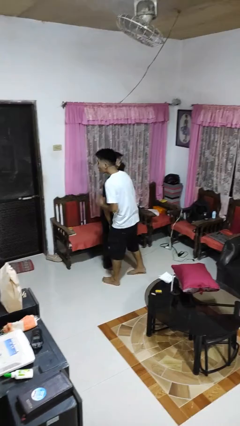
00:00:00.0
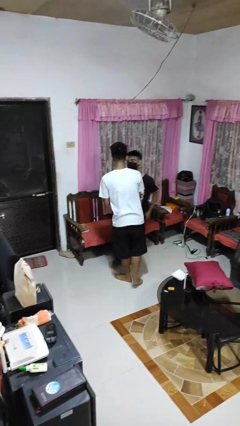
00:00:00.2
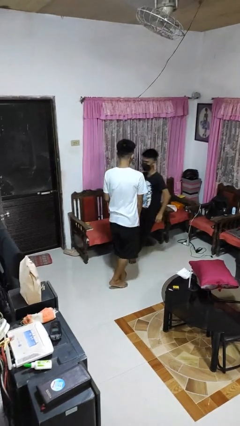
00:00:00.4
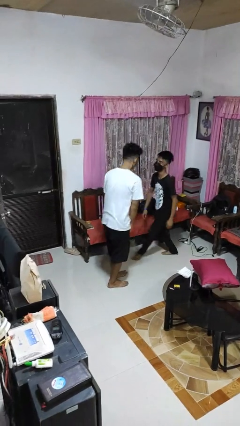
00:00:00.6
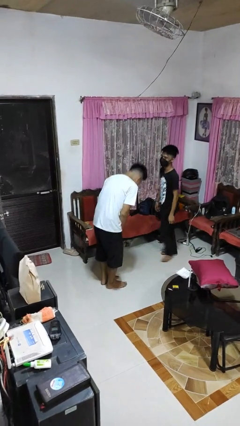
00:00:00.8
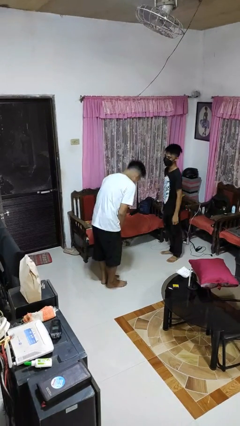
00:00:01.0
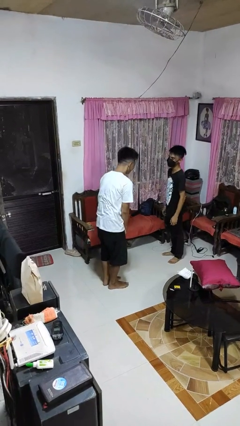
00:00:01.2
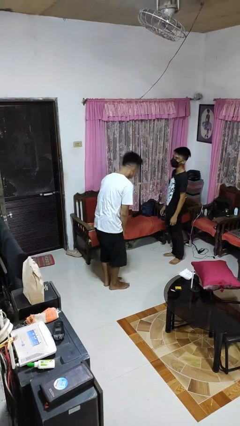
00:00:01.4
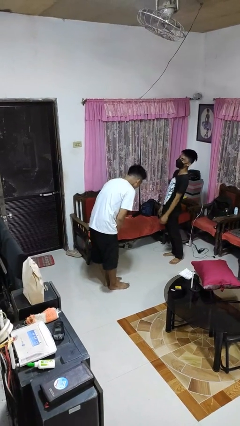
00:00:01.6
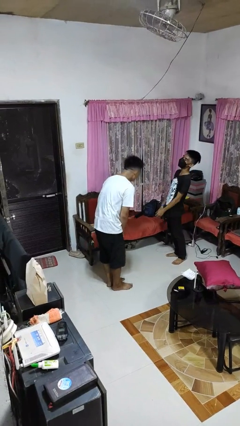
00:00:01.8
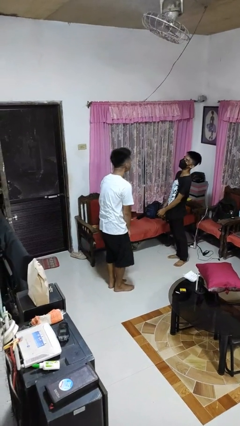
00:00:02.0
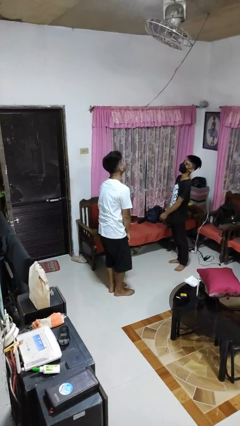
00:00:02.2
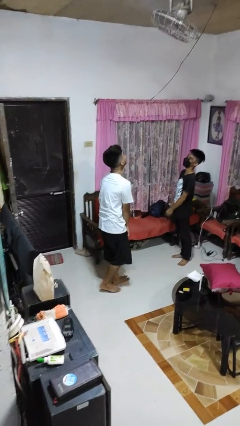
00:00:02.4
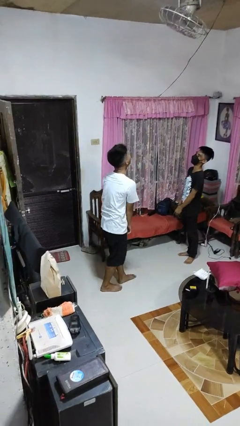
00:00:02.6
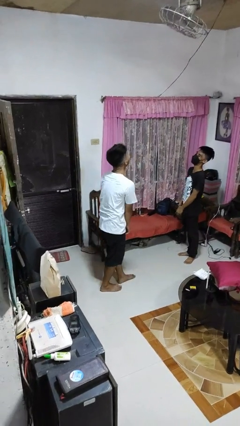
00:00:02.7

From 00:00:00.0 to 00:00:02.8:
person bumps into person

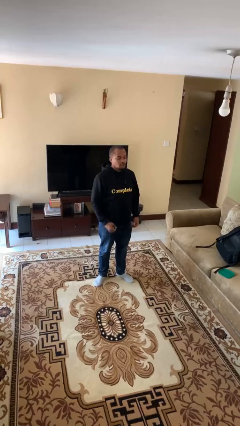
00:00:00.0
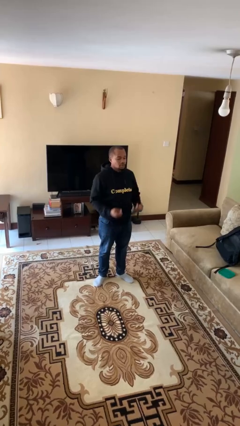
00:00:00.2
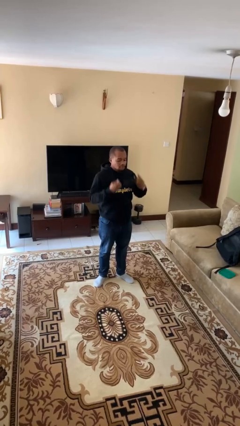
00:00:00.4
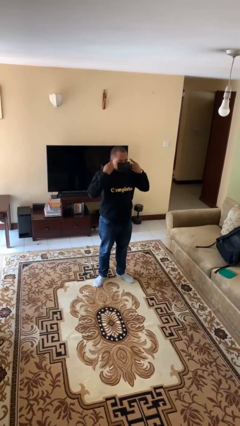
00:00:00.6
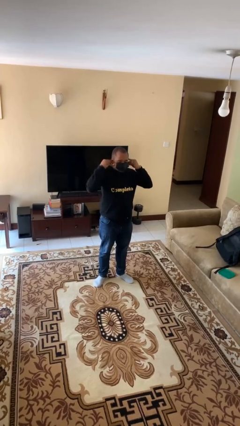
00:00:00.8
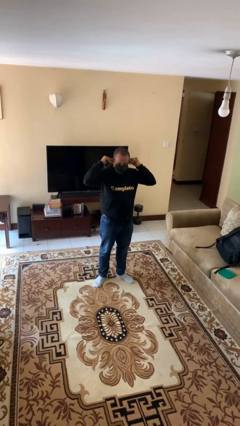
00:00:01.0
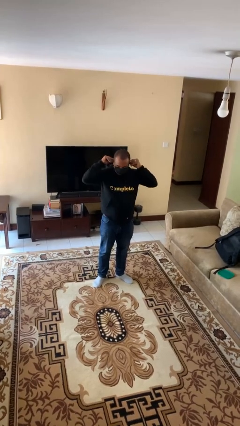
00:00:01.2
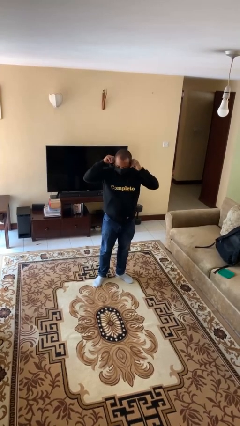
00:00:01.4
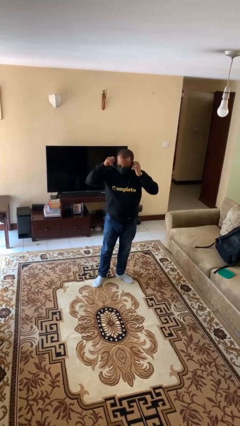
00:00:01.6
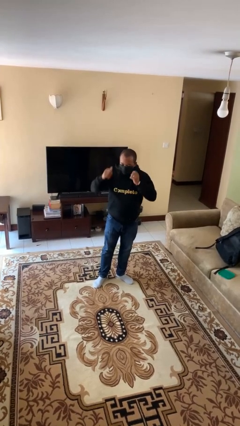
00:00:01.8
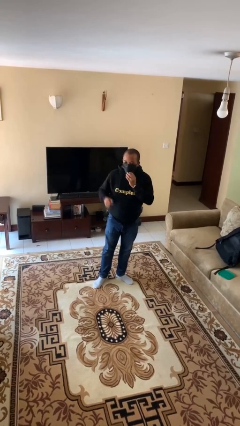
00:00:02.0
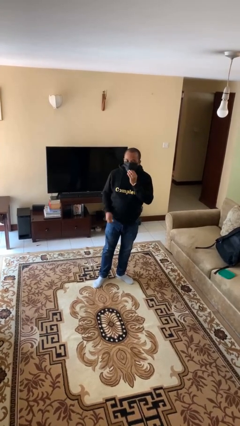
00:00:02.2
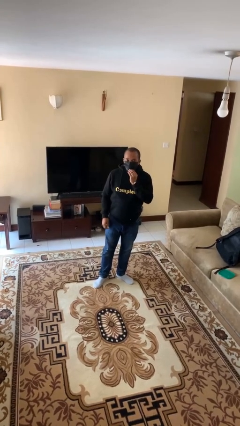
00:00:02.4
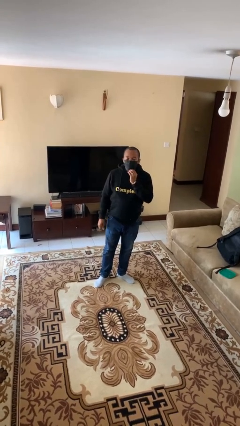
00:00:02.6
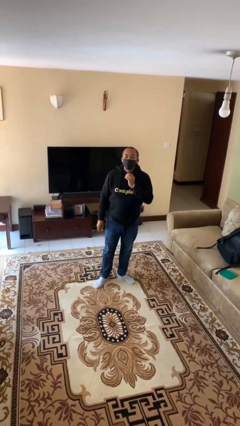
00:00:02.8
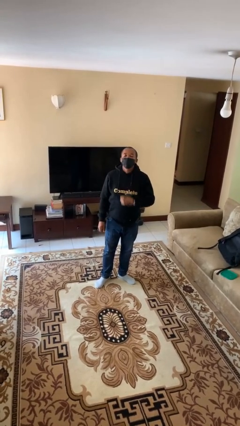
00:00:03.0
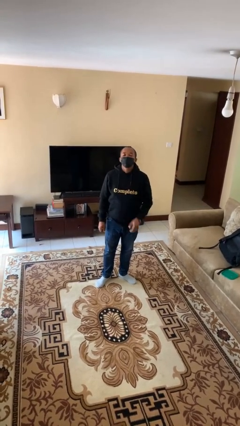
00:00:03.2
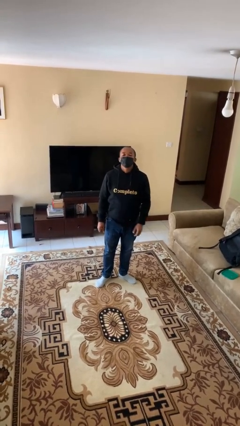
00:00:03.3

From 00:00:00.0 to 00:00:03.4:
person puts on facemask

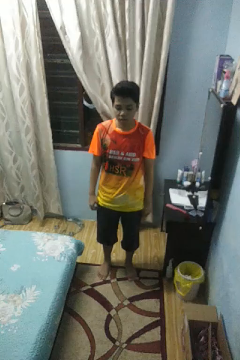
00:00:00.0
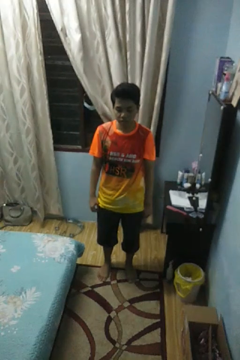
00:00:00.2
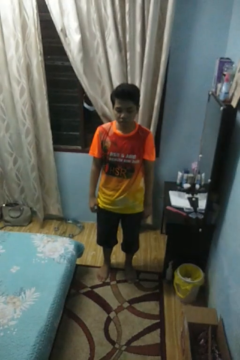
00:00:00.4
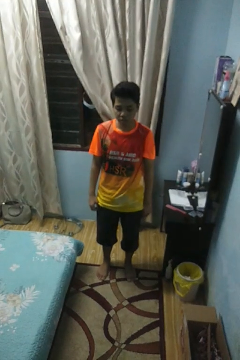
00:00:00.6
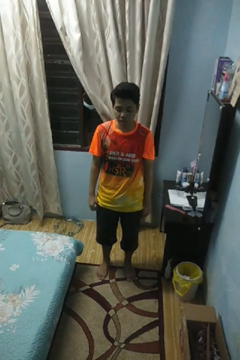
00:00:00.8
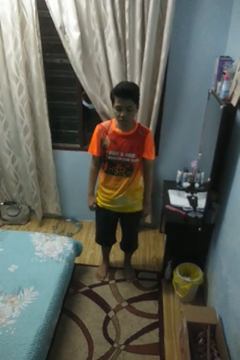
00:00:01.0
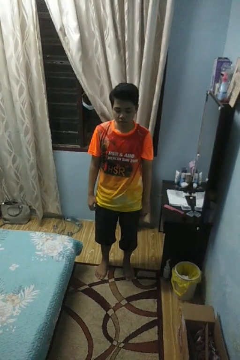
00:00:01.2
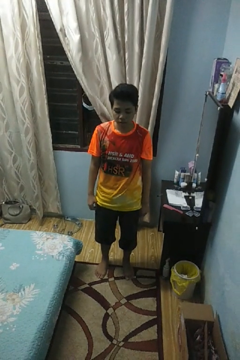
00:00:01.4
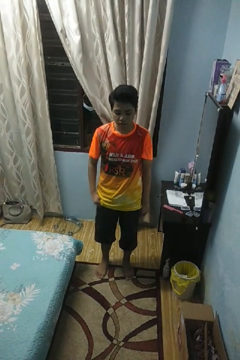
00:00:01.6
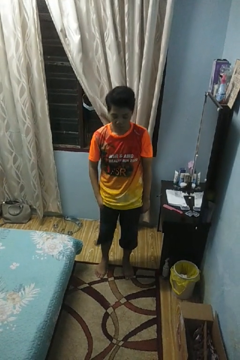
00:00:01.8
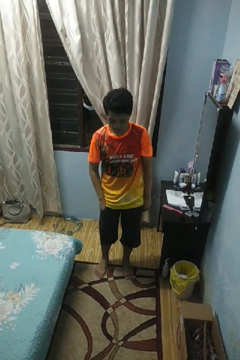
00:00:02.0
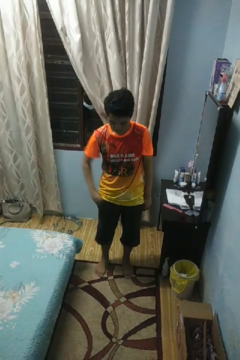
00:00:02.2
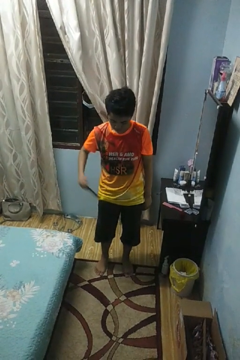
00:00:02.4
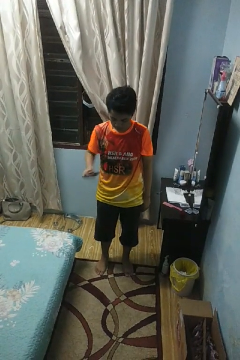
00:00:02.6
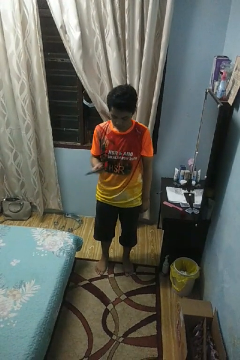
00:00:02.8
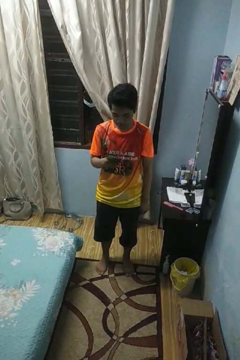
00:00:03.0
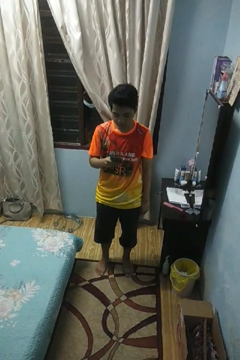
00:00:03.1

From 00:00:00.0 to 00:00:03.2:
person takes phone from pocket

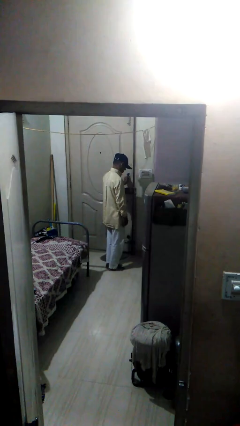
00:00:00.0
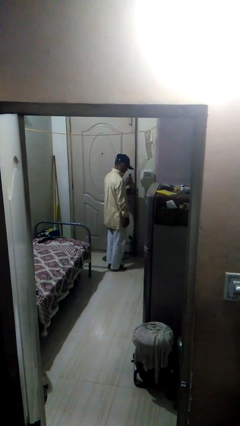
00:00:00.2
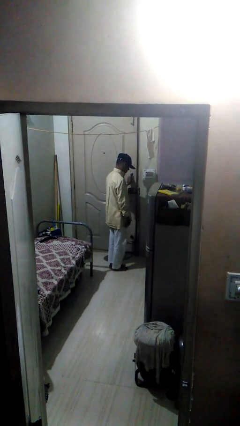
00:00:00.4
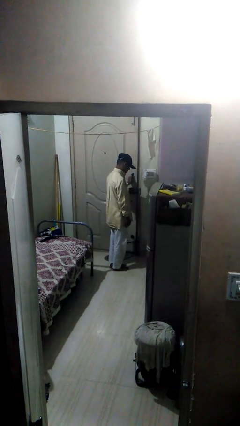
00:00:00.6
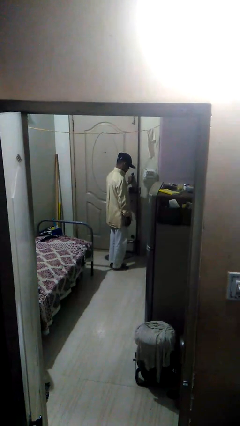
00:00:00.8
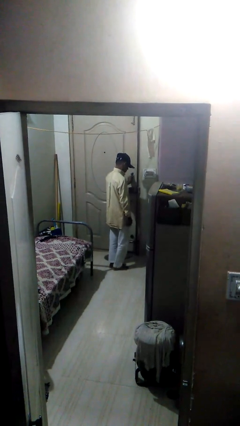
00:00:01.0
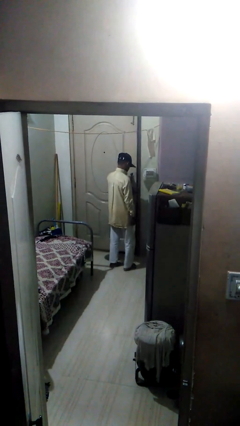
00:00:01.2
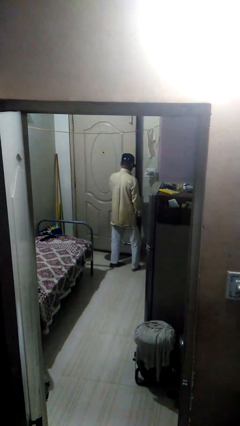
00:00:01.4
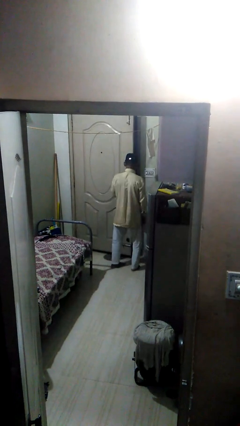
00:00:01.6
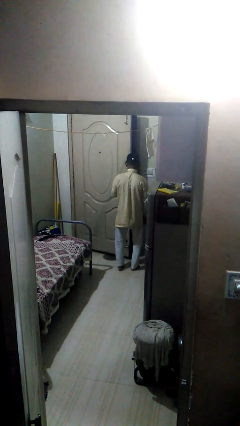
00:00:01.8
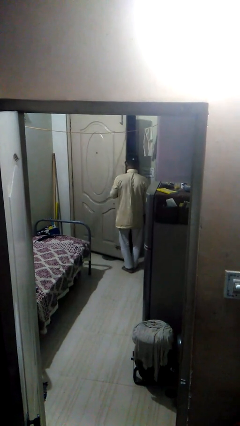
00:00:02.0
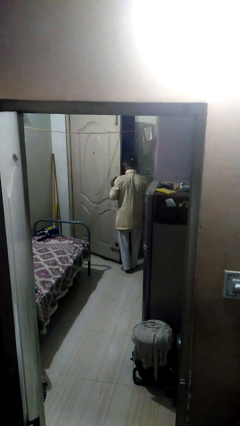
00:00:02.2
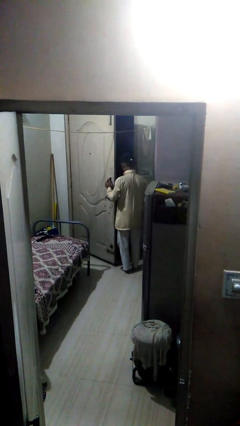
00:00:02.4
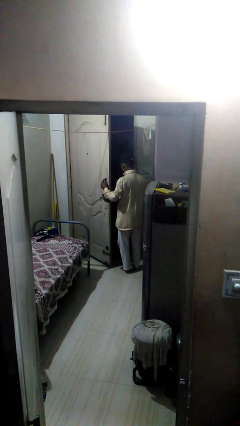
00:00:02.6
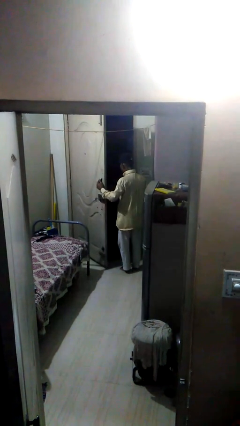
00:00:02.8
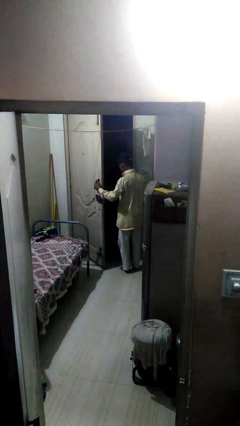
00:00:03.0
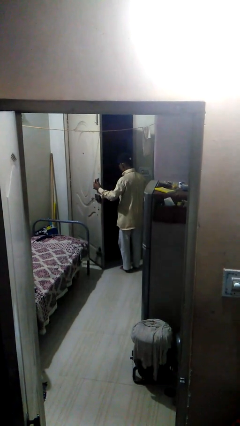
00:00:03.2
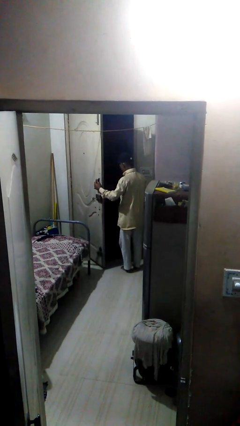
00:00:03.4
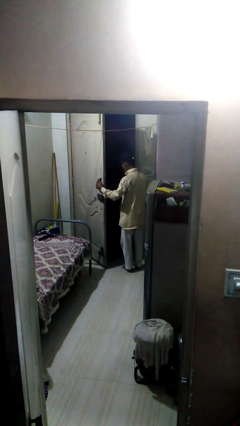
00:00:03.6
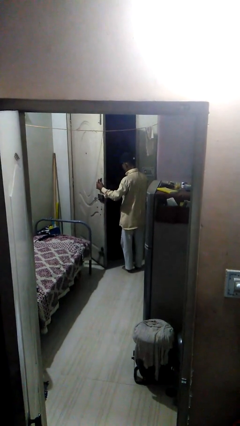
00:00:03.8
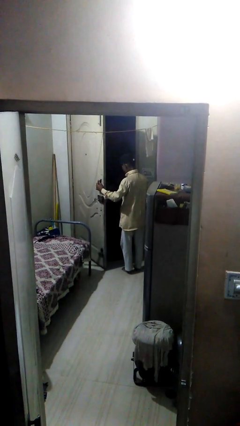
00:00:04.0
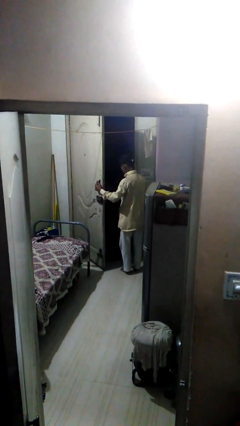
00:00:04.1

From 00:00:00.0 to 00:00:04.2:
person opens facility door

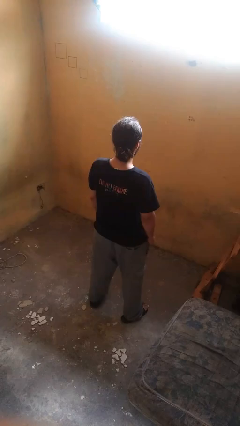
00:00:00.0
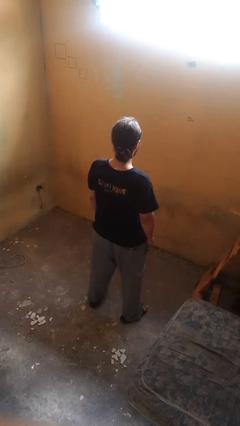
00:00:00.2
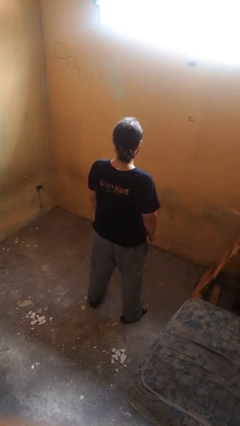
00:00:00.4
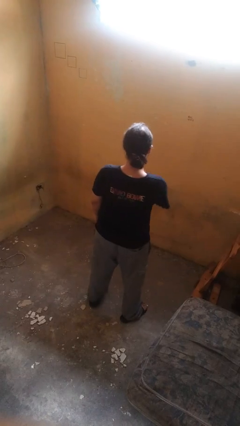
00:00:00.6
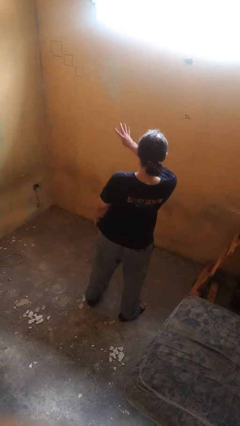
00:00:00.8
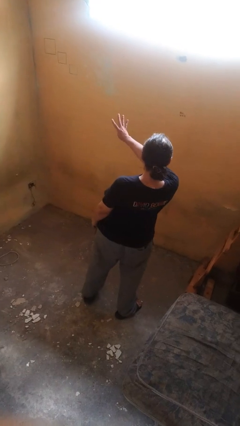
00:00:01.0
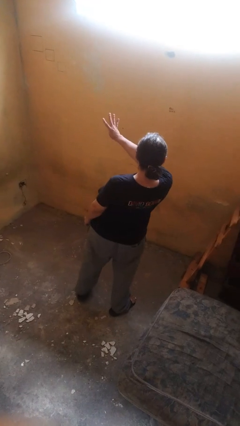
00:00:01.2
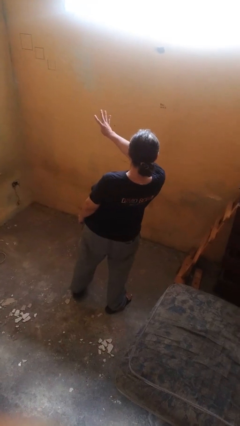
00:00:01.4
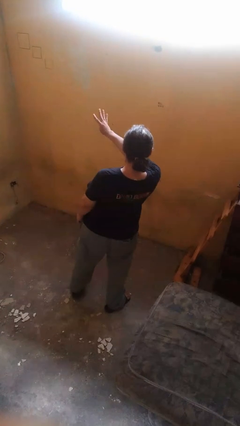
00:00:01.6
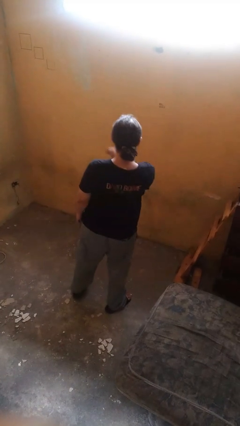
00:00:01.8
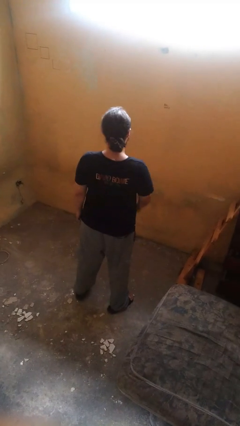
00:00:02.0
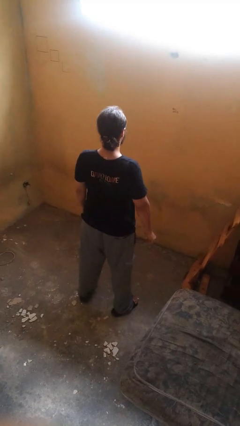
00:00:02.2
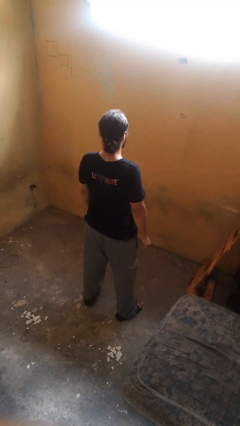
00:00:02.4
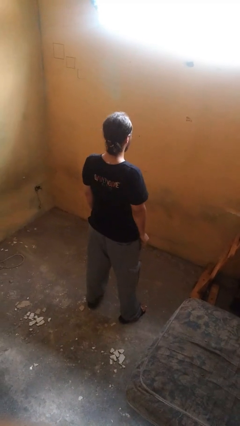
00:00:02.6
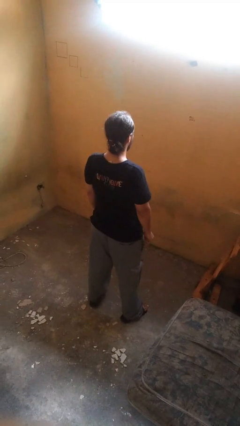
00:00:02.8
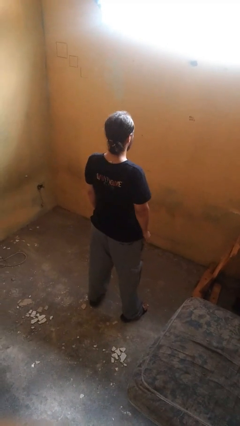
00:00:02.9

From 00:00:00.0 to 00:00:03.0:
person gestures number four

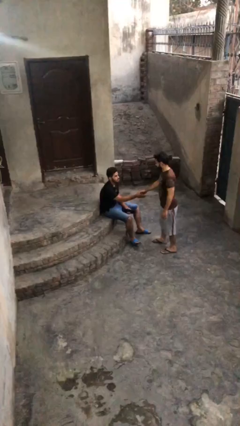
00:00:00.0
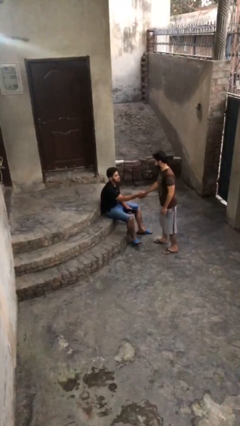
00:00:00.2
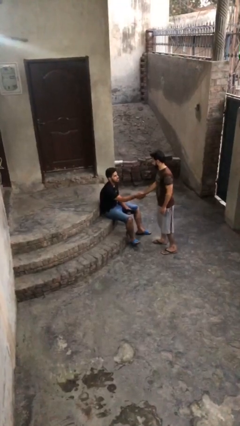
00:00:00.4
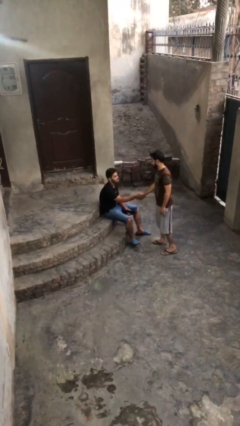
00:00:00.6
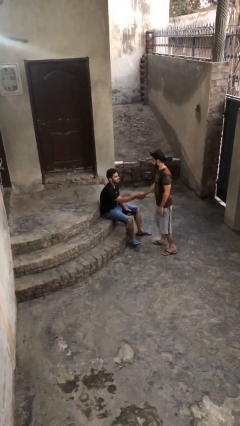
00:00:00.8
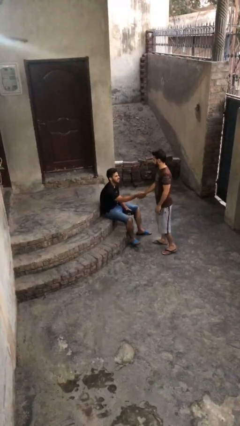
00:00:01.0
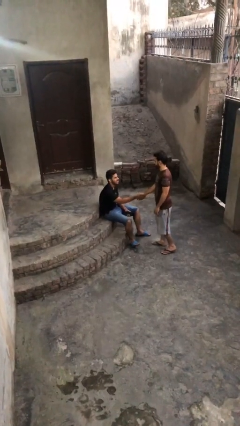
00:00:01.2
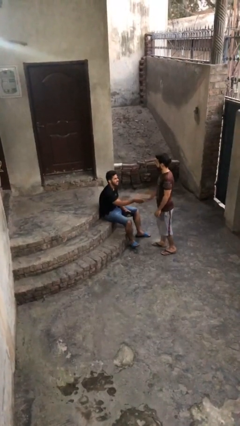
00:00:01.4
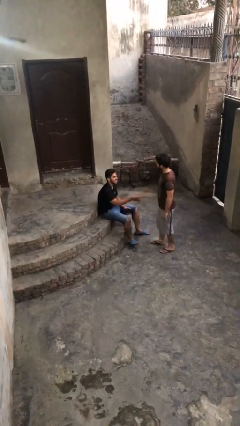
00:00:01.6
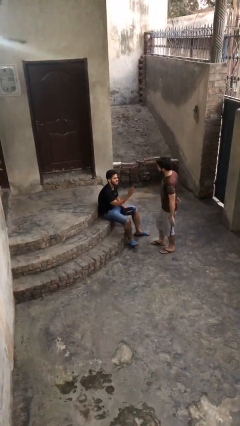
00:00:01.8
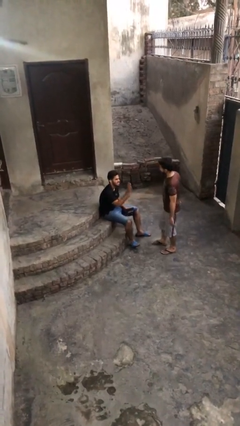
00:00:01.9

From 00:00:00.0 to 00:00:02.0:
person shakes hand
